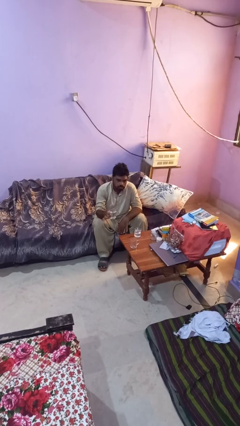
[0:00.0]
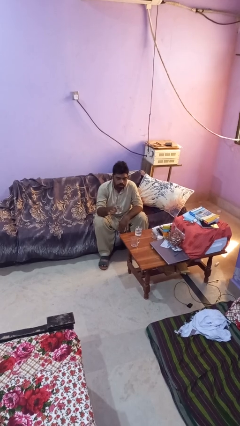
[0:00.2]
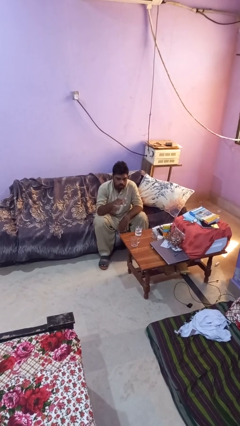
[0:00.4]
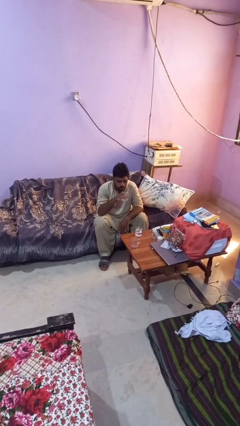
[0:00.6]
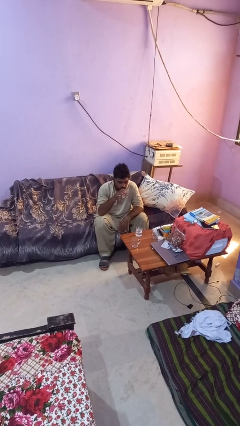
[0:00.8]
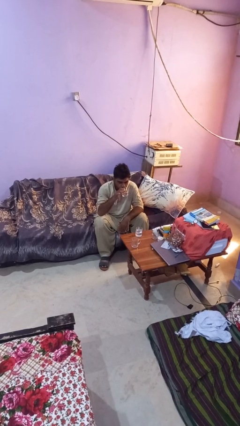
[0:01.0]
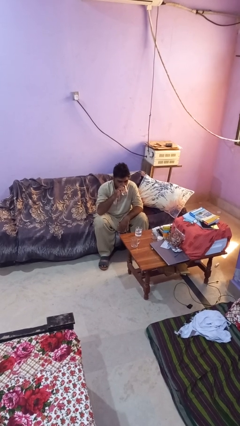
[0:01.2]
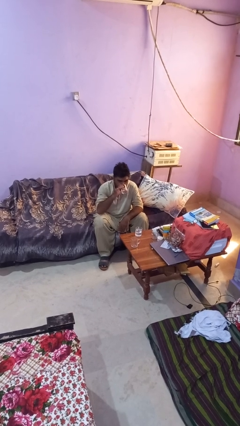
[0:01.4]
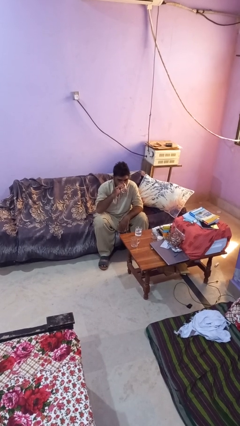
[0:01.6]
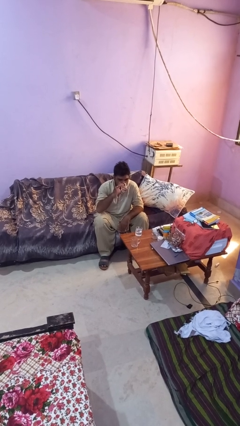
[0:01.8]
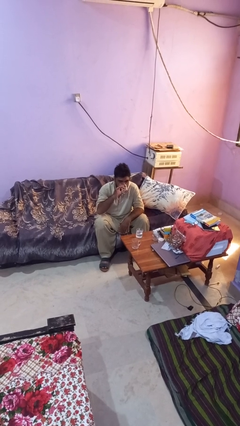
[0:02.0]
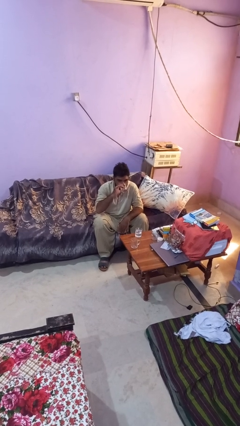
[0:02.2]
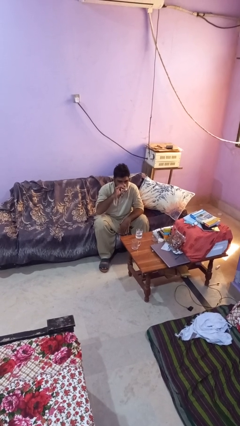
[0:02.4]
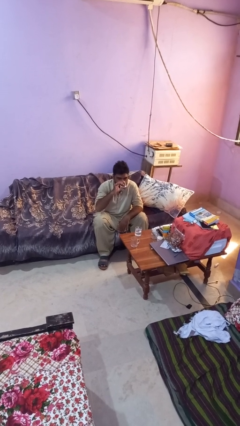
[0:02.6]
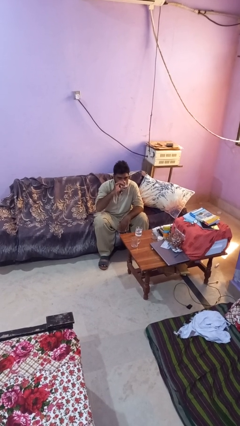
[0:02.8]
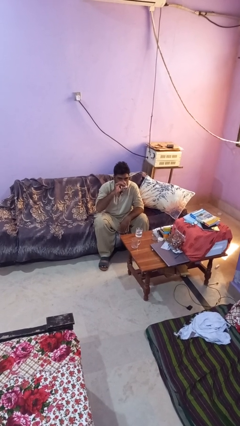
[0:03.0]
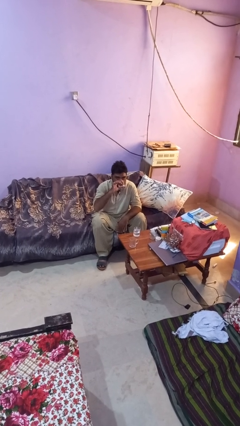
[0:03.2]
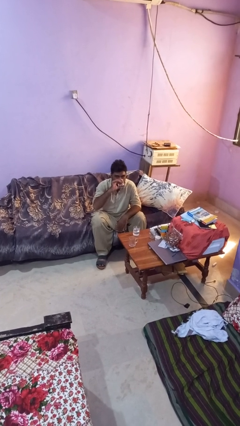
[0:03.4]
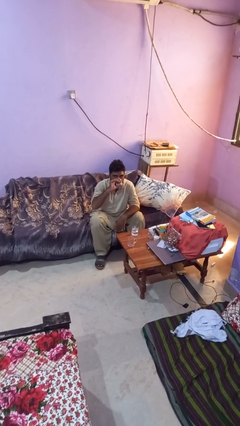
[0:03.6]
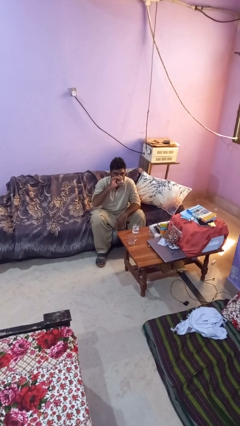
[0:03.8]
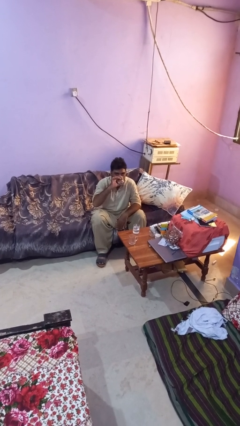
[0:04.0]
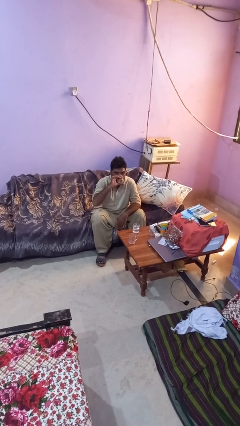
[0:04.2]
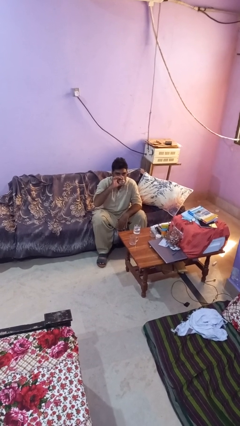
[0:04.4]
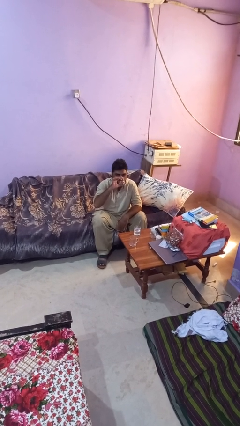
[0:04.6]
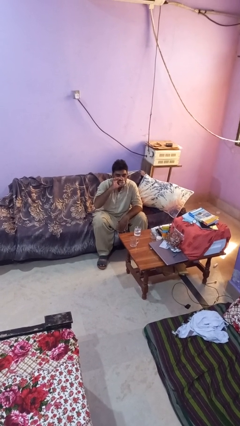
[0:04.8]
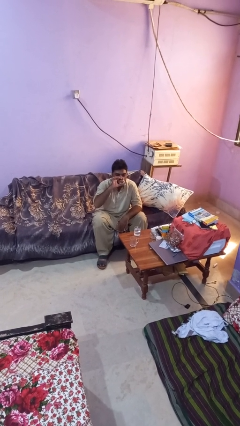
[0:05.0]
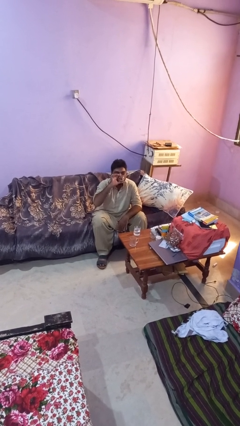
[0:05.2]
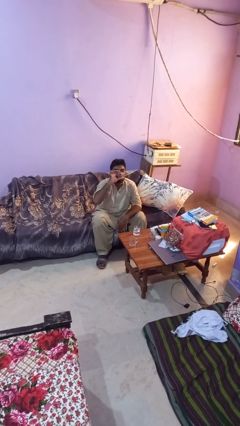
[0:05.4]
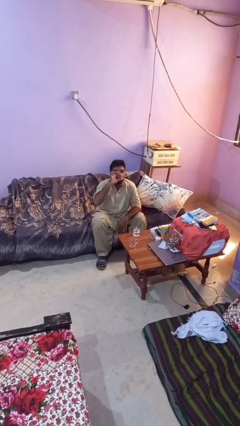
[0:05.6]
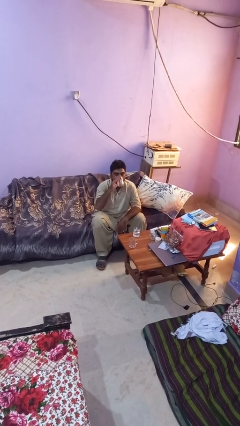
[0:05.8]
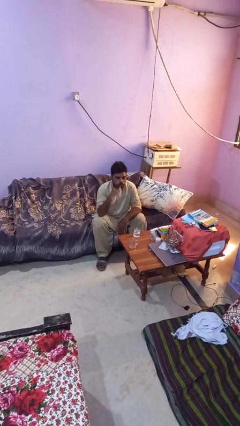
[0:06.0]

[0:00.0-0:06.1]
person drinks from shotglass

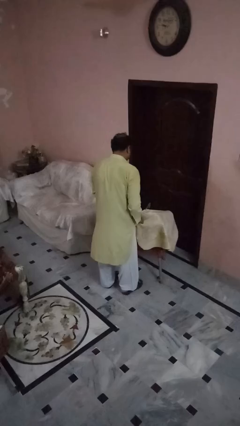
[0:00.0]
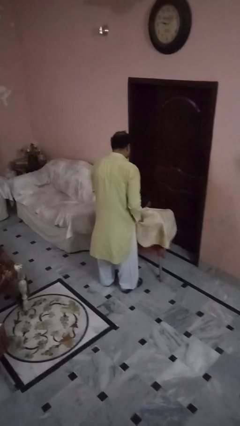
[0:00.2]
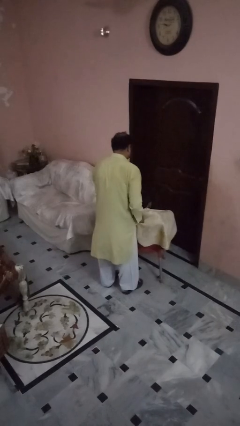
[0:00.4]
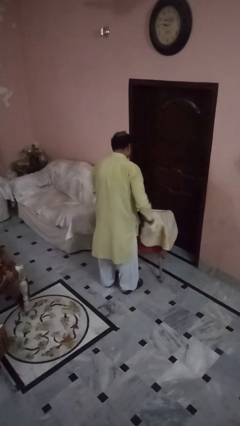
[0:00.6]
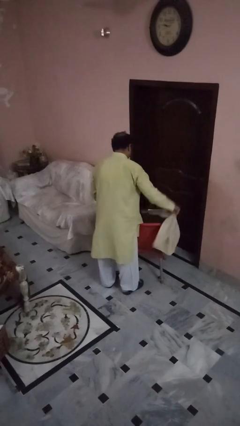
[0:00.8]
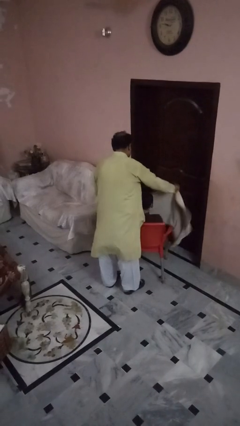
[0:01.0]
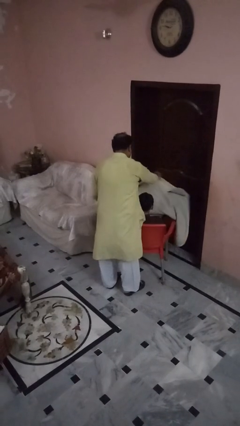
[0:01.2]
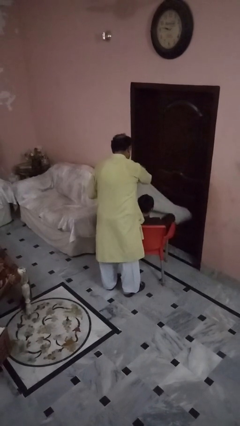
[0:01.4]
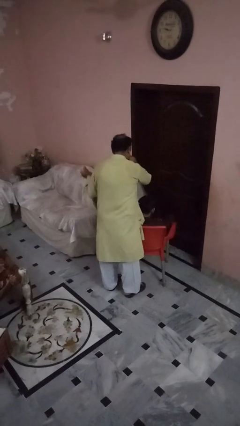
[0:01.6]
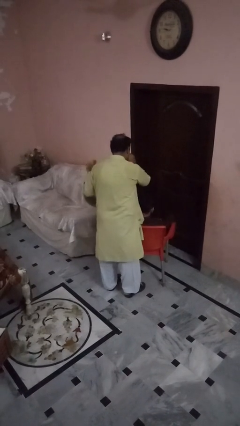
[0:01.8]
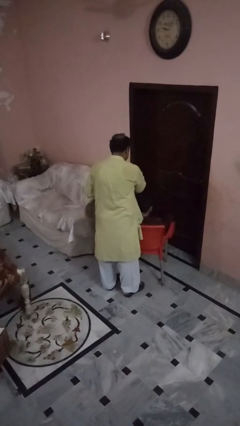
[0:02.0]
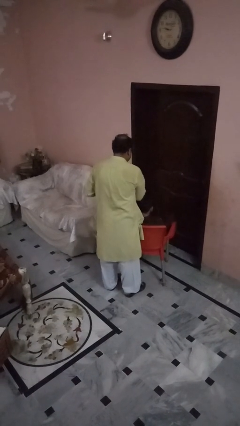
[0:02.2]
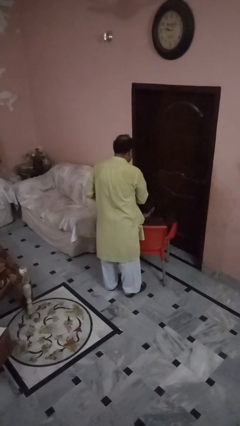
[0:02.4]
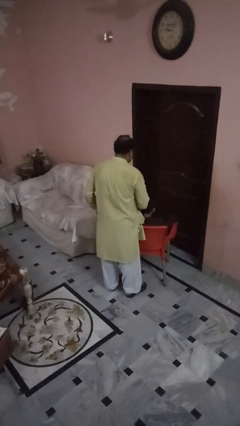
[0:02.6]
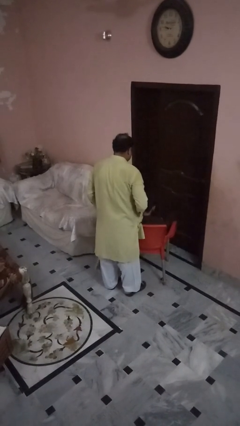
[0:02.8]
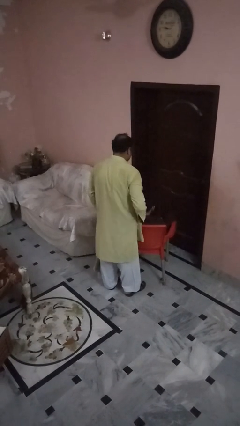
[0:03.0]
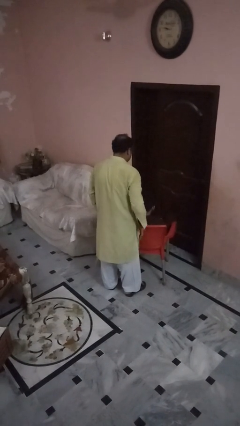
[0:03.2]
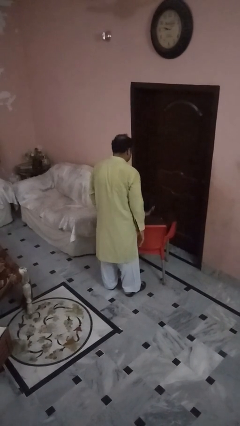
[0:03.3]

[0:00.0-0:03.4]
person uncovers friend with blanket

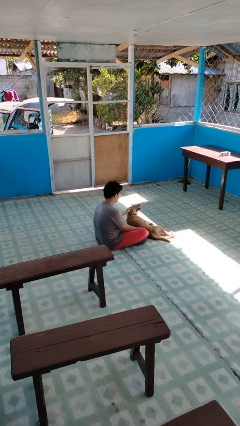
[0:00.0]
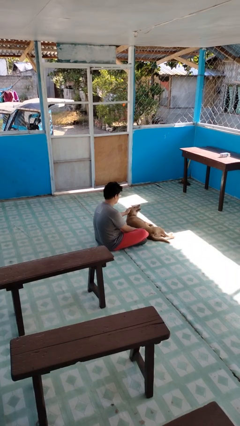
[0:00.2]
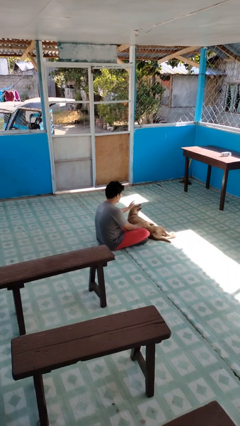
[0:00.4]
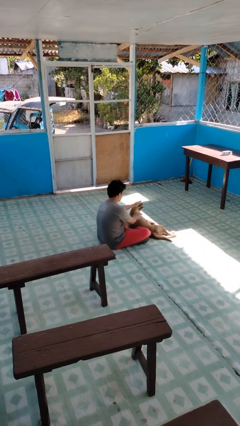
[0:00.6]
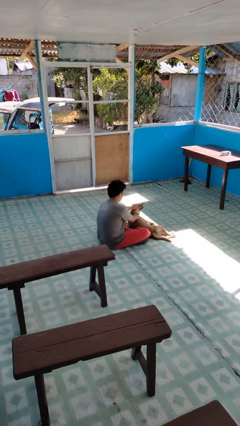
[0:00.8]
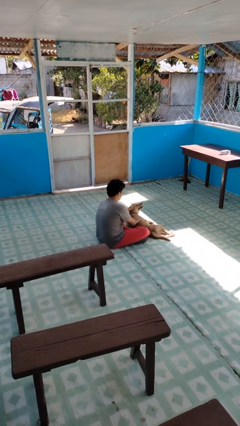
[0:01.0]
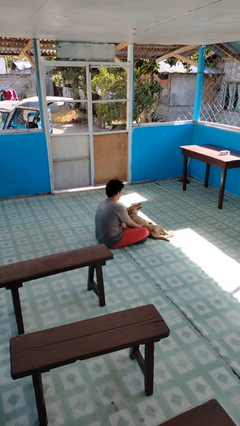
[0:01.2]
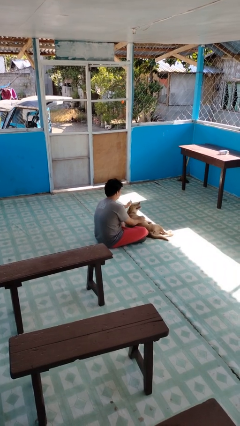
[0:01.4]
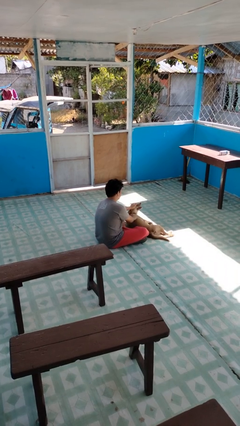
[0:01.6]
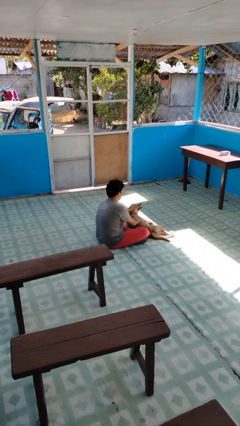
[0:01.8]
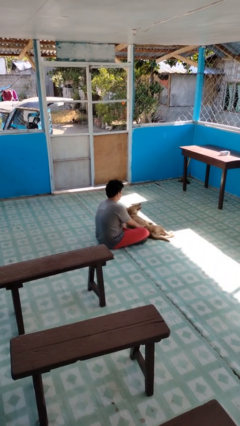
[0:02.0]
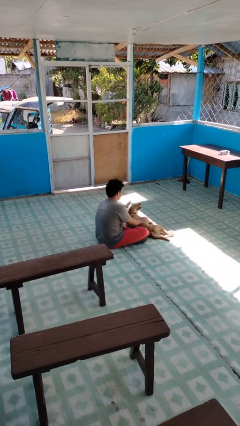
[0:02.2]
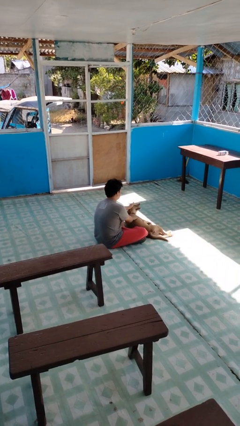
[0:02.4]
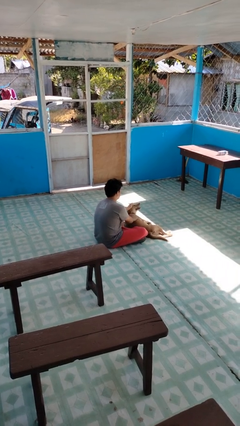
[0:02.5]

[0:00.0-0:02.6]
person pets dog

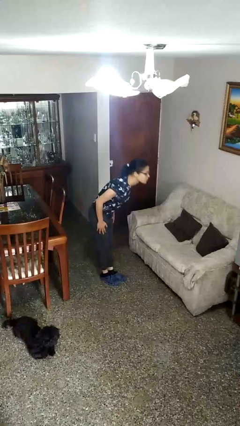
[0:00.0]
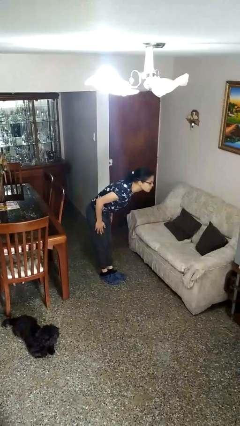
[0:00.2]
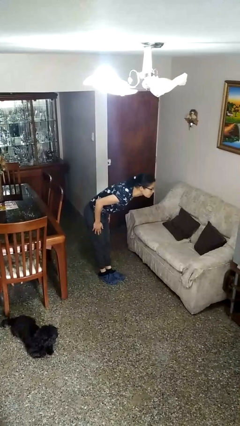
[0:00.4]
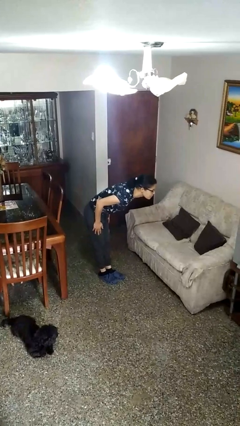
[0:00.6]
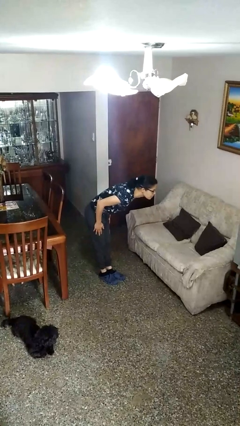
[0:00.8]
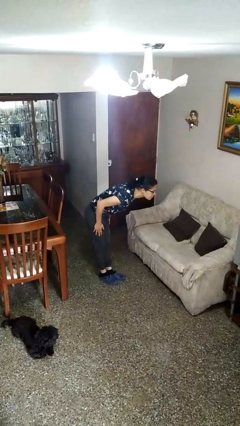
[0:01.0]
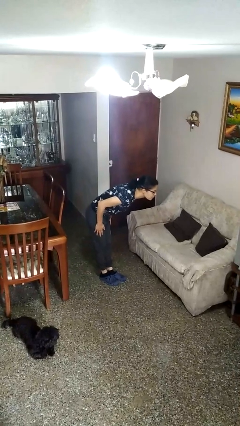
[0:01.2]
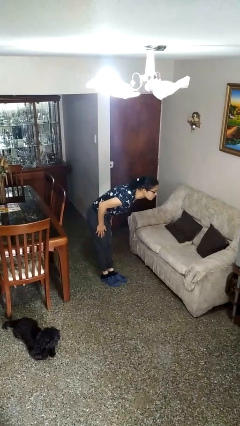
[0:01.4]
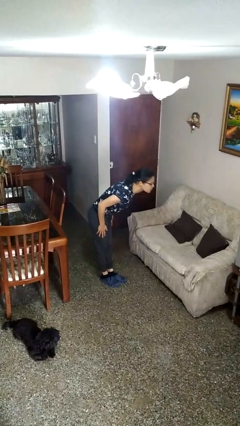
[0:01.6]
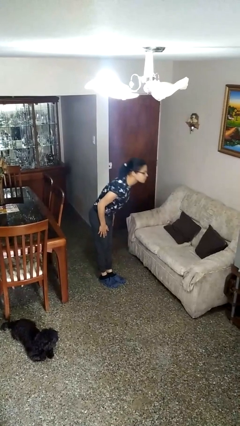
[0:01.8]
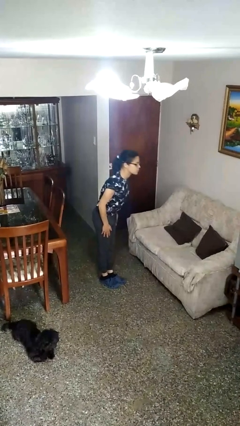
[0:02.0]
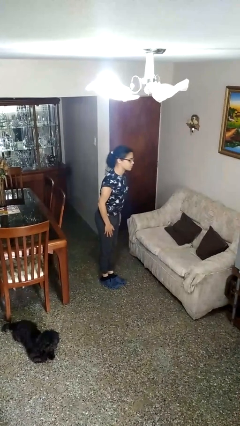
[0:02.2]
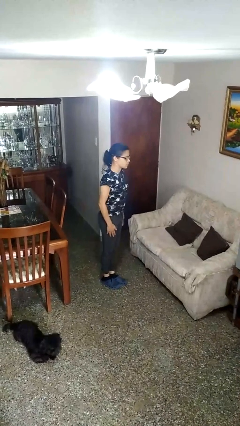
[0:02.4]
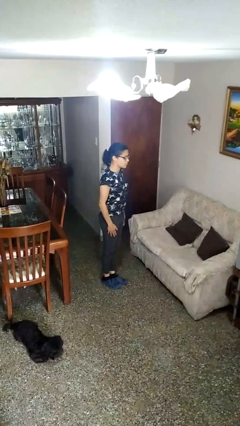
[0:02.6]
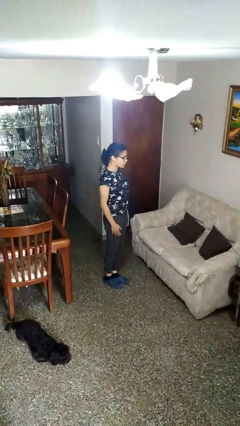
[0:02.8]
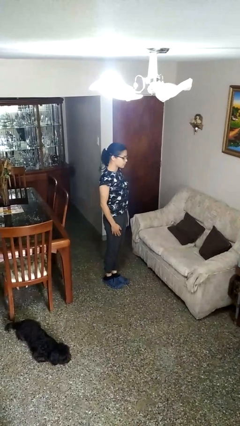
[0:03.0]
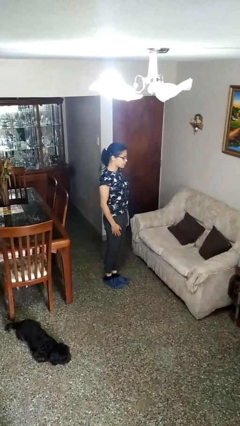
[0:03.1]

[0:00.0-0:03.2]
person bows

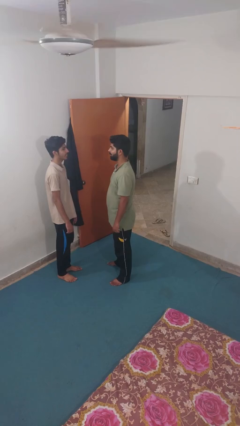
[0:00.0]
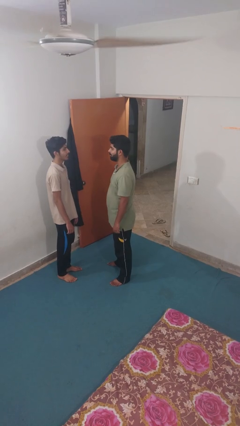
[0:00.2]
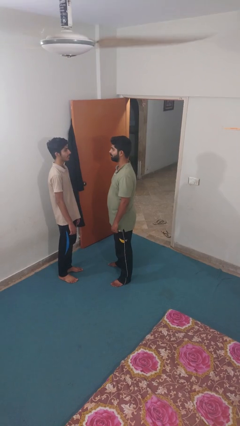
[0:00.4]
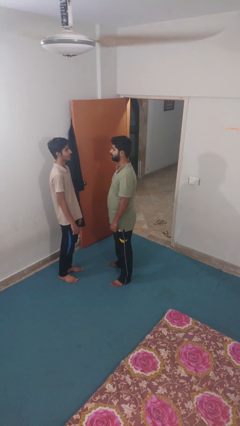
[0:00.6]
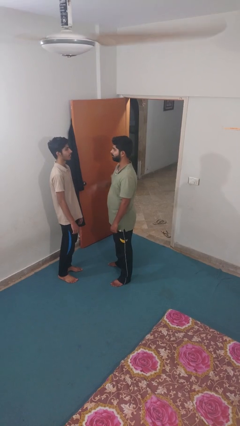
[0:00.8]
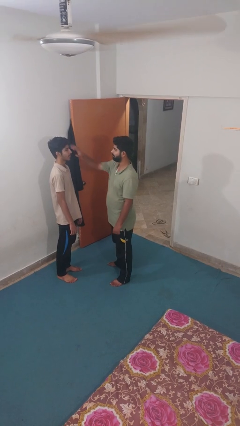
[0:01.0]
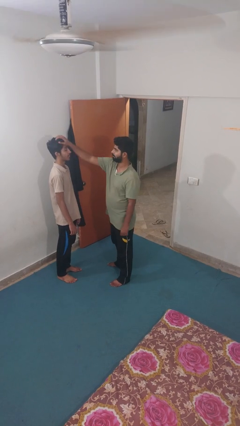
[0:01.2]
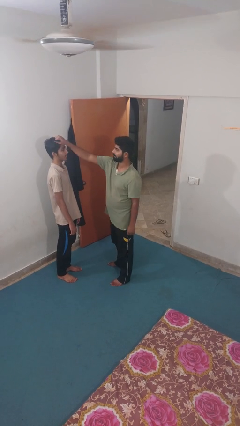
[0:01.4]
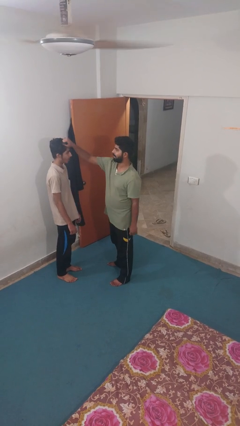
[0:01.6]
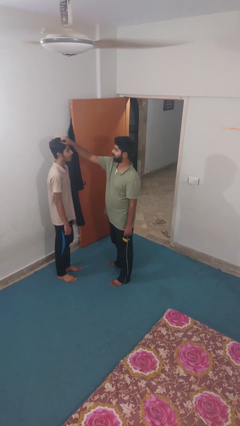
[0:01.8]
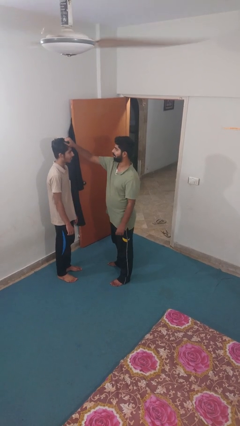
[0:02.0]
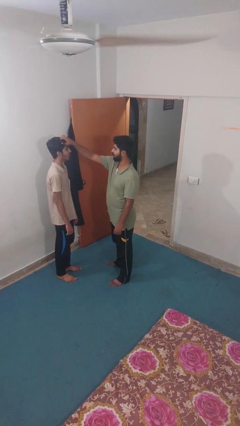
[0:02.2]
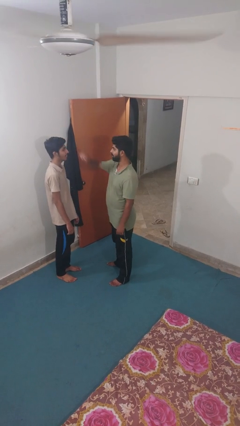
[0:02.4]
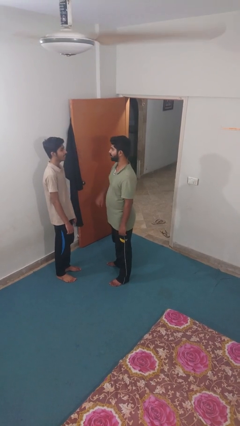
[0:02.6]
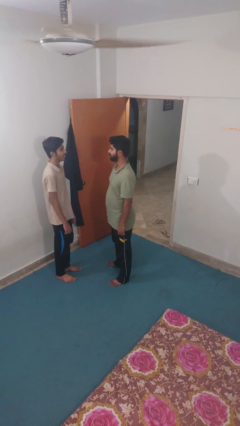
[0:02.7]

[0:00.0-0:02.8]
person grabs person by hair
